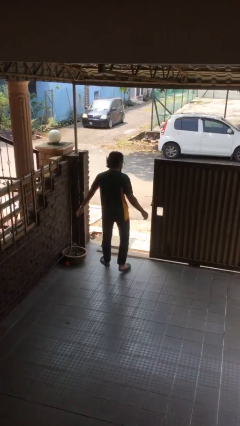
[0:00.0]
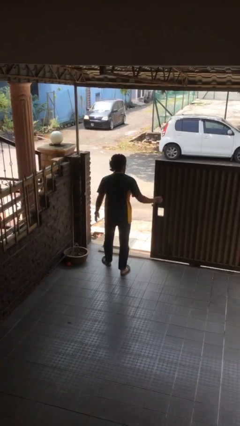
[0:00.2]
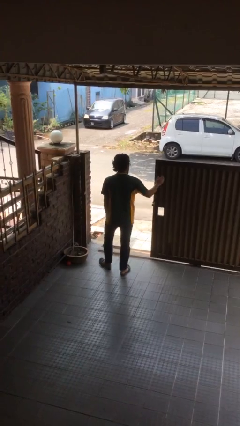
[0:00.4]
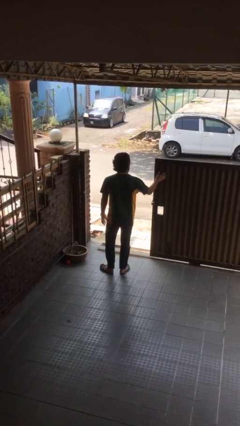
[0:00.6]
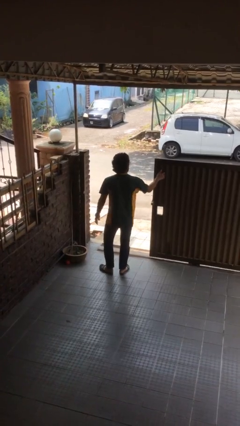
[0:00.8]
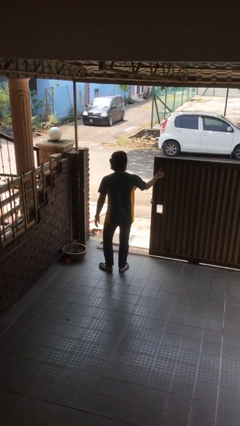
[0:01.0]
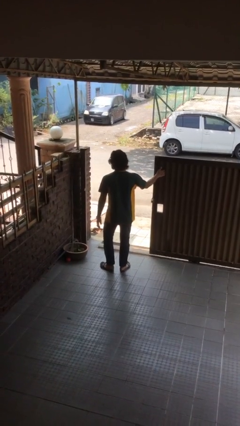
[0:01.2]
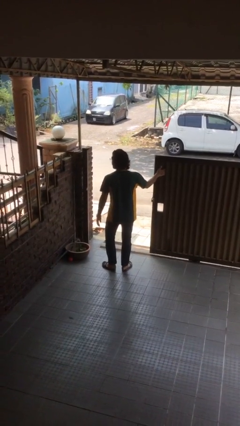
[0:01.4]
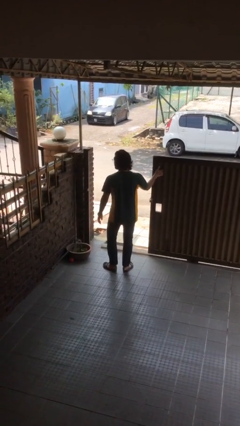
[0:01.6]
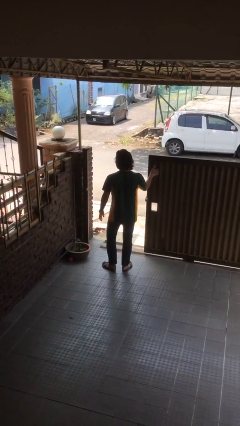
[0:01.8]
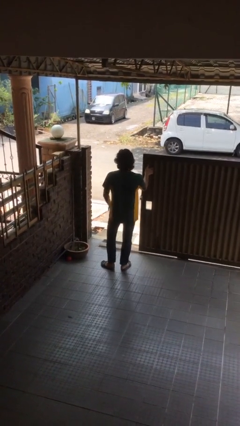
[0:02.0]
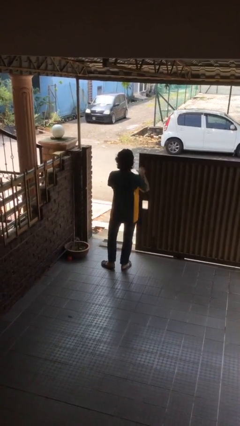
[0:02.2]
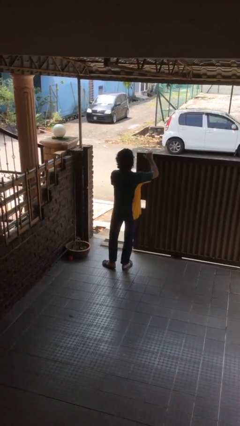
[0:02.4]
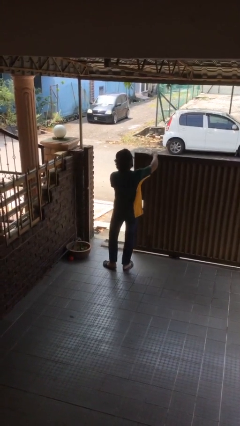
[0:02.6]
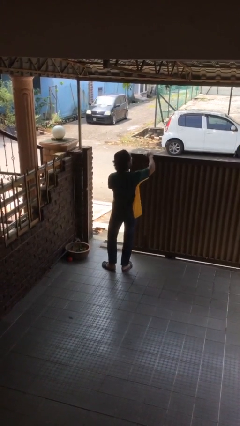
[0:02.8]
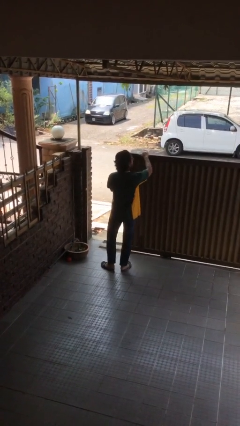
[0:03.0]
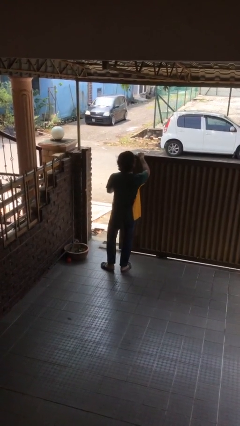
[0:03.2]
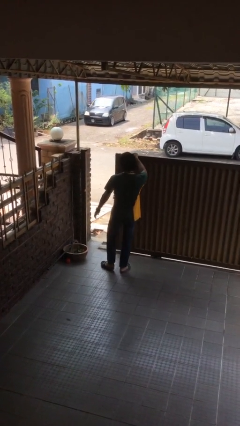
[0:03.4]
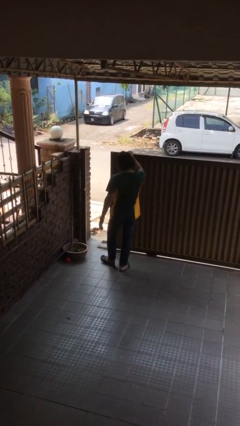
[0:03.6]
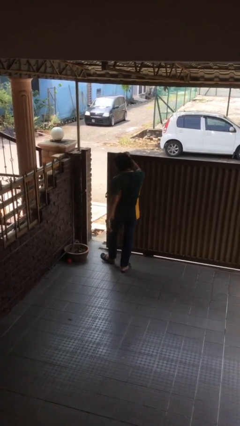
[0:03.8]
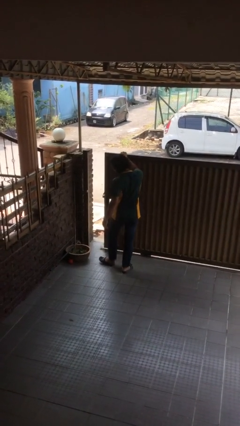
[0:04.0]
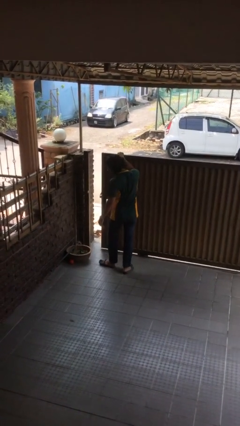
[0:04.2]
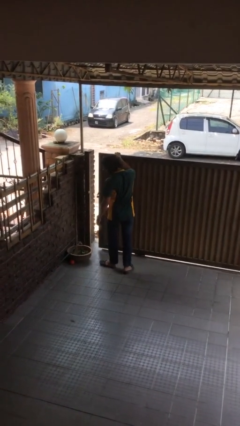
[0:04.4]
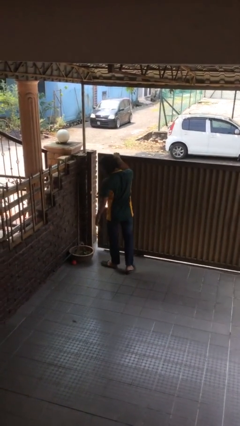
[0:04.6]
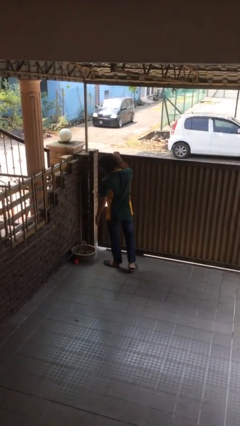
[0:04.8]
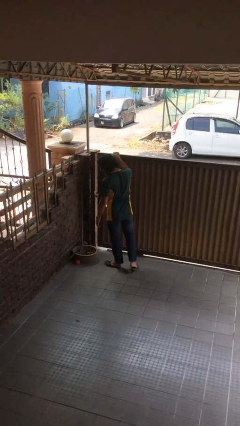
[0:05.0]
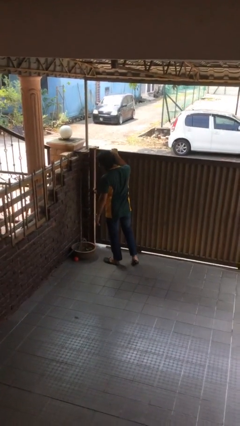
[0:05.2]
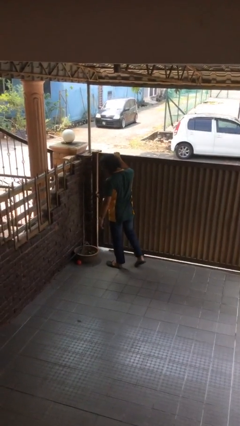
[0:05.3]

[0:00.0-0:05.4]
person closes facility door

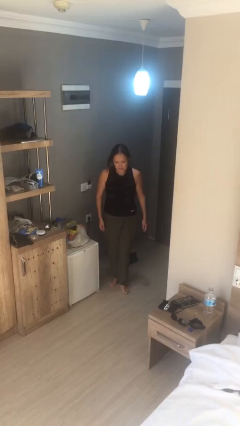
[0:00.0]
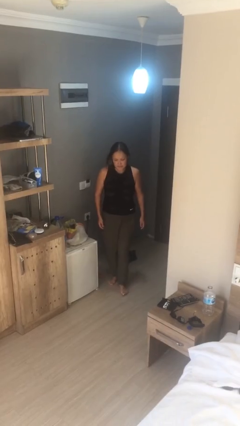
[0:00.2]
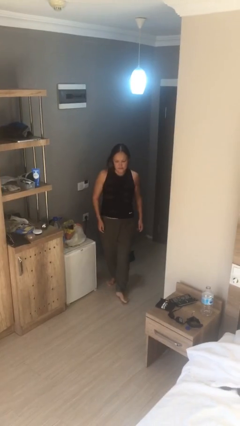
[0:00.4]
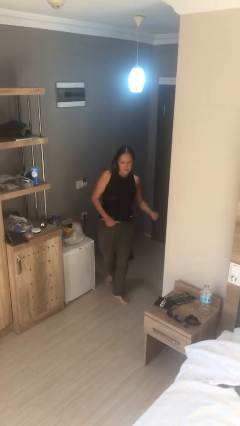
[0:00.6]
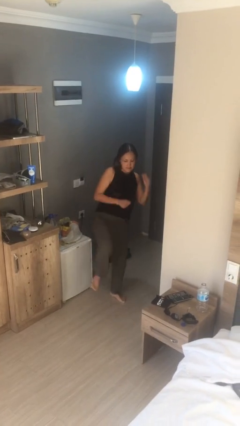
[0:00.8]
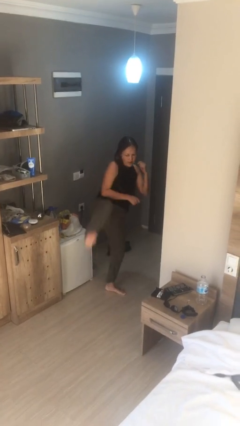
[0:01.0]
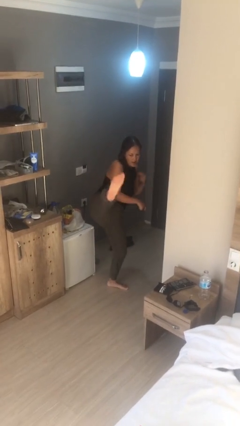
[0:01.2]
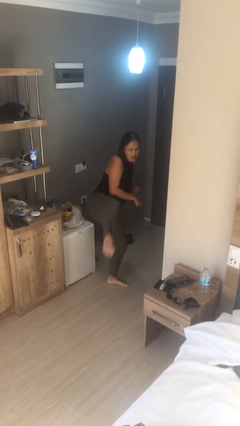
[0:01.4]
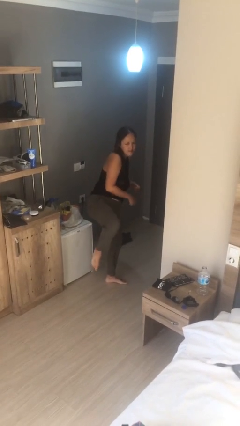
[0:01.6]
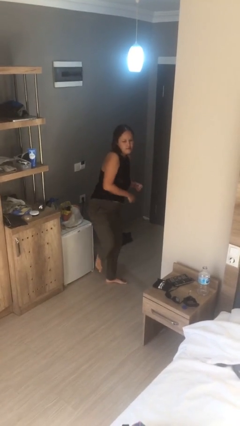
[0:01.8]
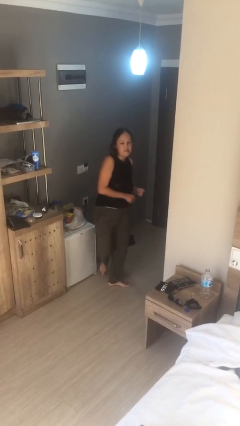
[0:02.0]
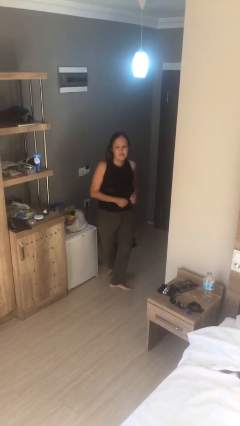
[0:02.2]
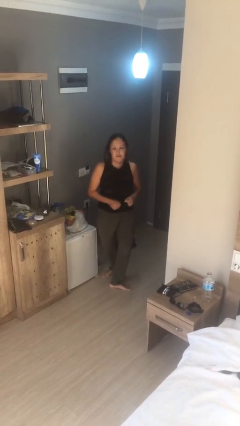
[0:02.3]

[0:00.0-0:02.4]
person karate kicks

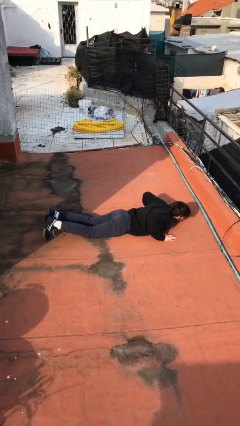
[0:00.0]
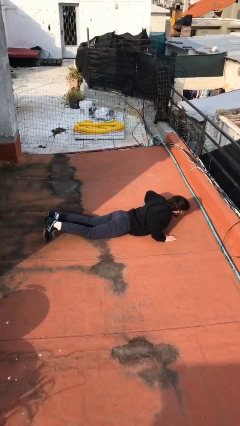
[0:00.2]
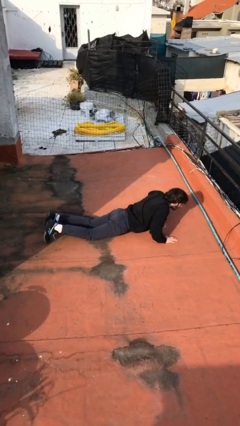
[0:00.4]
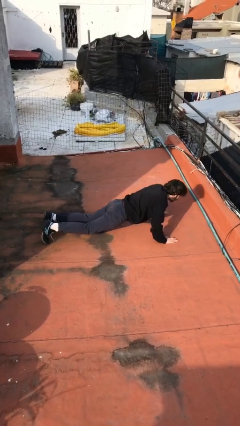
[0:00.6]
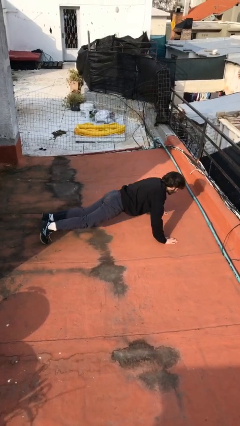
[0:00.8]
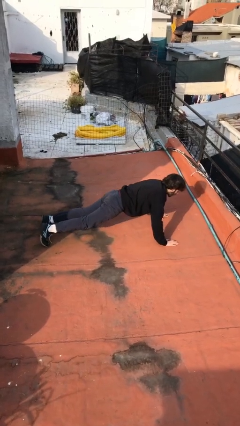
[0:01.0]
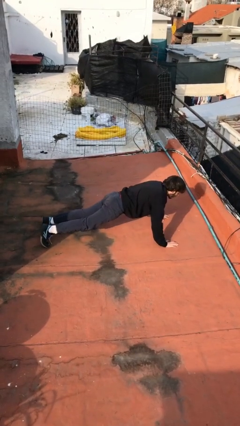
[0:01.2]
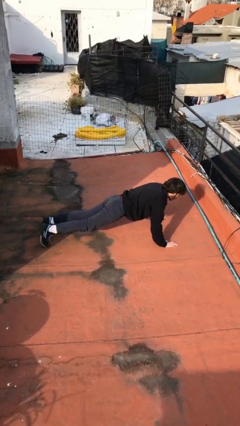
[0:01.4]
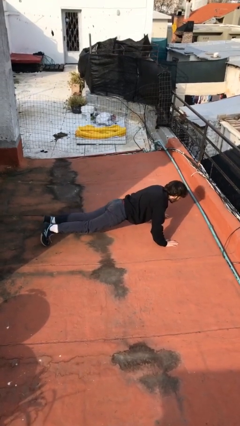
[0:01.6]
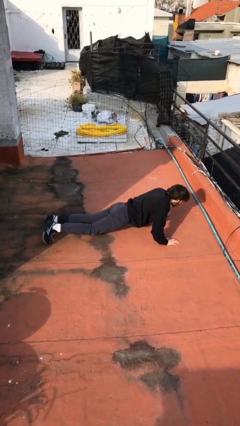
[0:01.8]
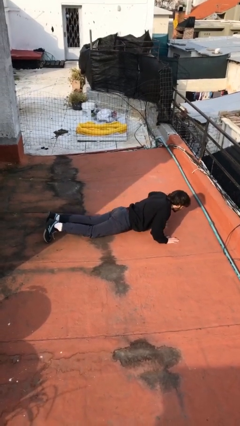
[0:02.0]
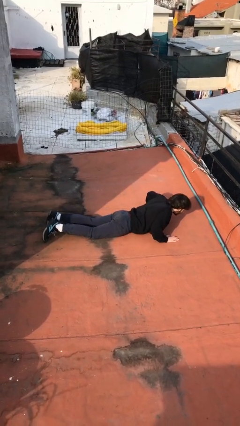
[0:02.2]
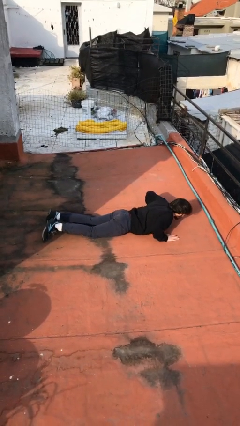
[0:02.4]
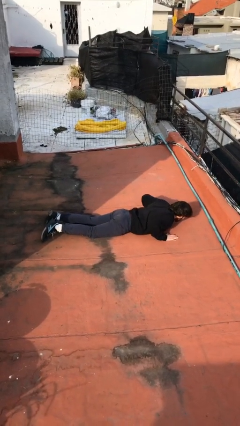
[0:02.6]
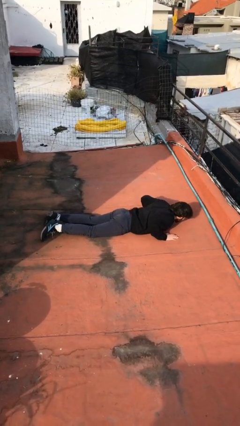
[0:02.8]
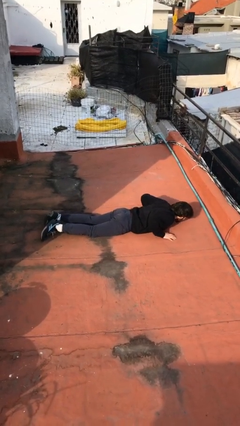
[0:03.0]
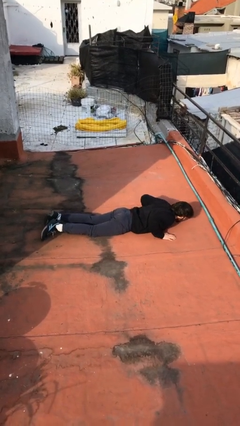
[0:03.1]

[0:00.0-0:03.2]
person exercises with pushup

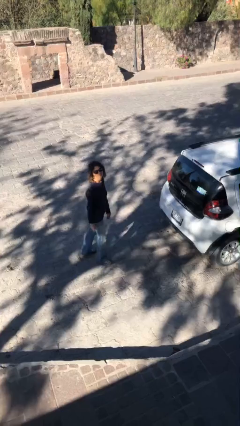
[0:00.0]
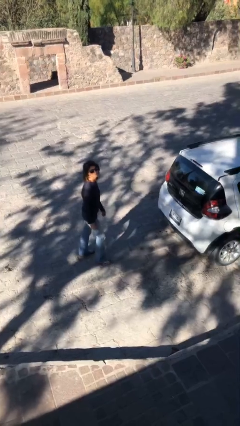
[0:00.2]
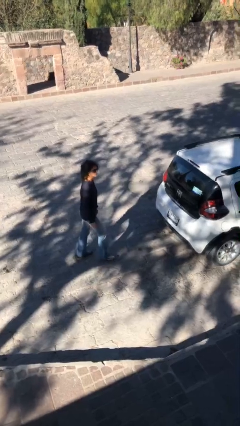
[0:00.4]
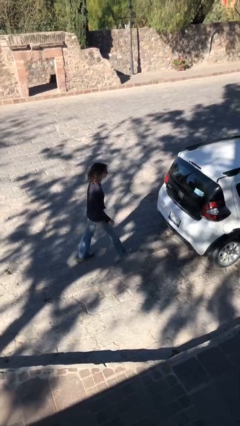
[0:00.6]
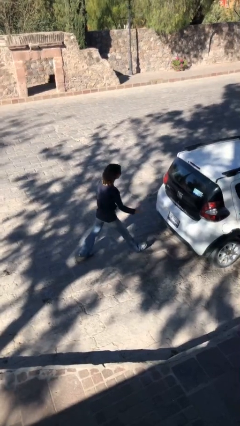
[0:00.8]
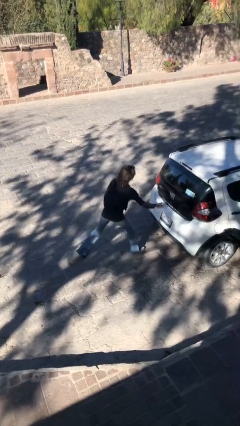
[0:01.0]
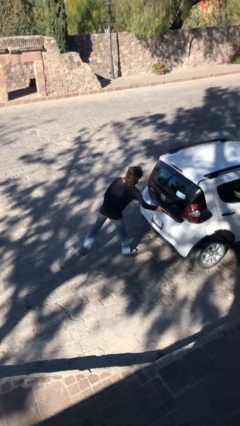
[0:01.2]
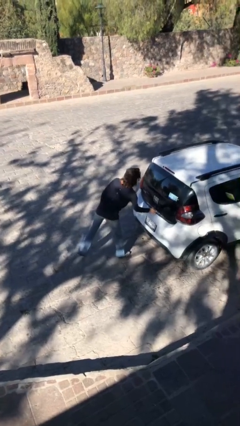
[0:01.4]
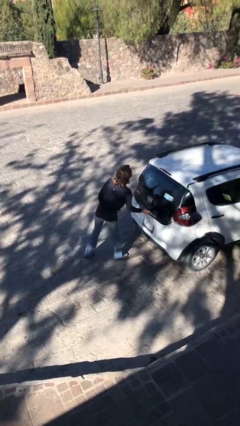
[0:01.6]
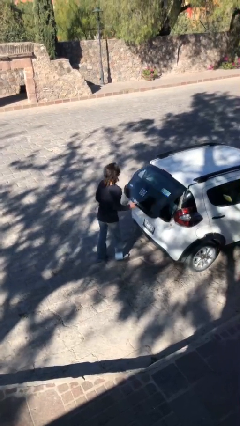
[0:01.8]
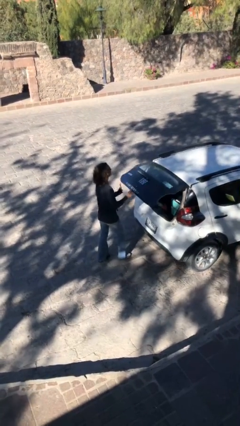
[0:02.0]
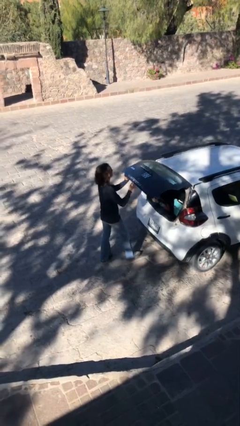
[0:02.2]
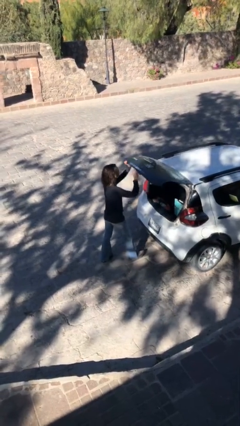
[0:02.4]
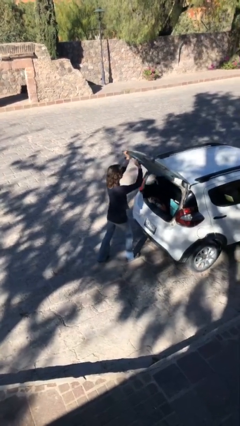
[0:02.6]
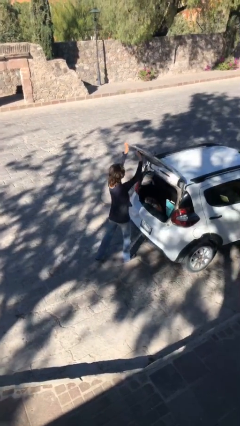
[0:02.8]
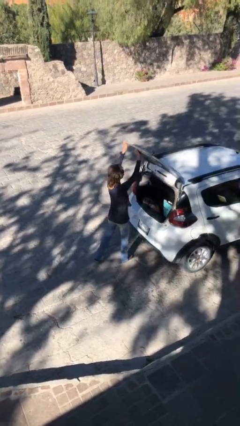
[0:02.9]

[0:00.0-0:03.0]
person opens car trunk

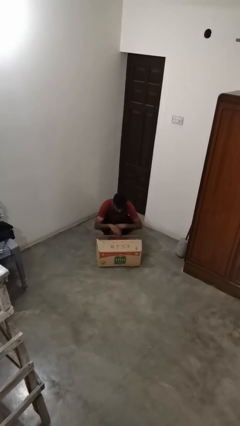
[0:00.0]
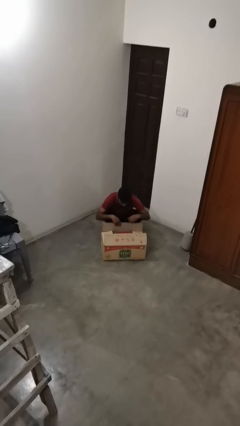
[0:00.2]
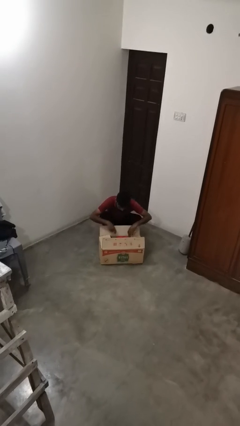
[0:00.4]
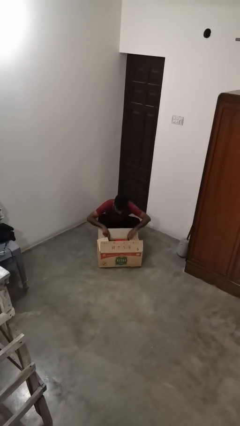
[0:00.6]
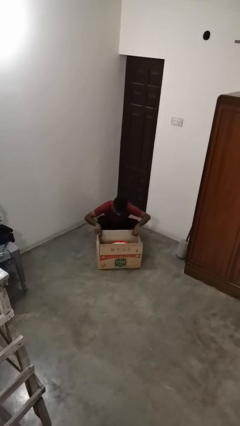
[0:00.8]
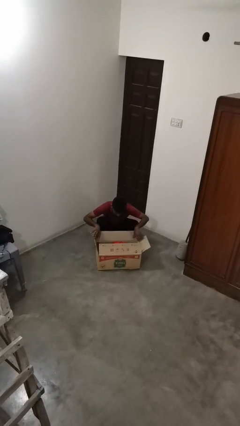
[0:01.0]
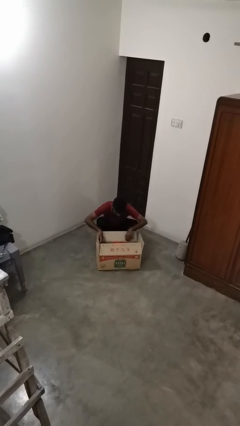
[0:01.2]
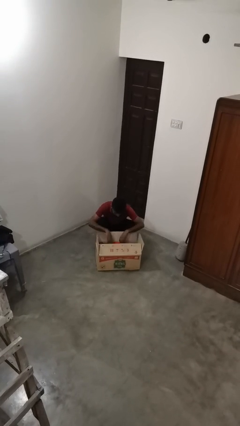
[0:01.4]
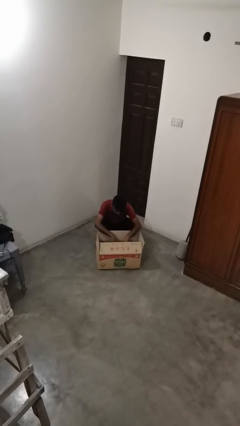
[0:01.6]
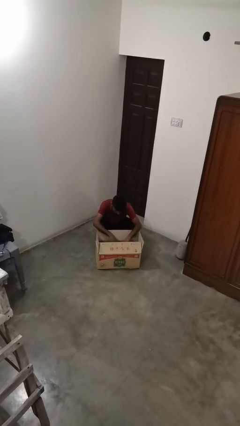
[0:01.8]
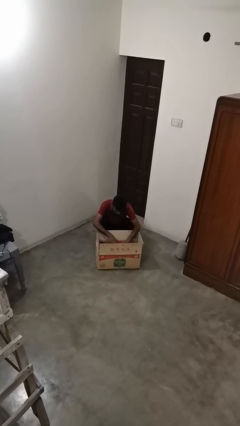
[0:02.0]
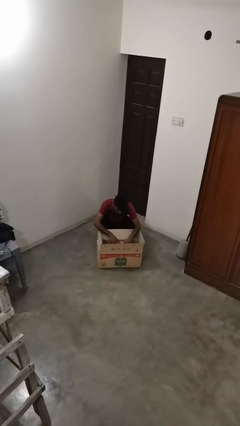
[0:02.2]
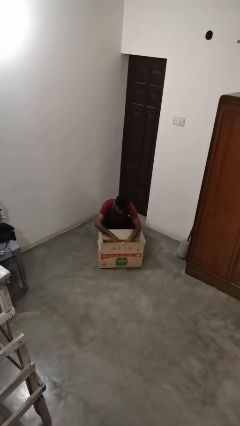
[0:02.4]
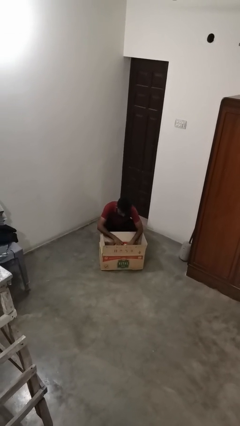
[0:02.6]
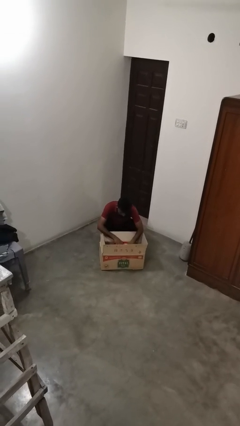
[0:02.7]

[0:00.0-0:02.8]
person searches in box

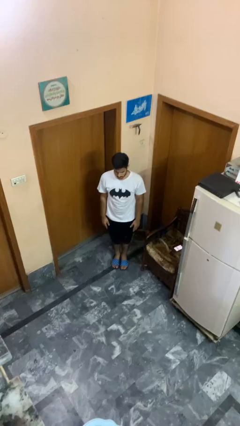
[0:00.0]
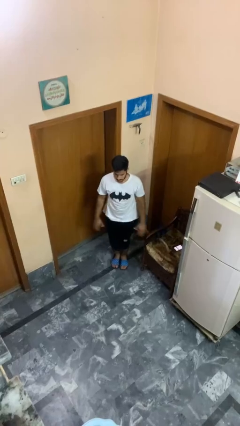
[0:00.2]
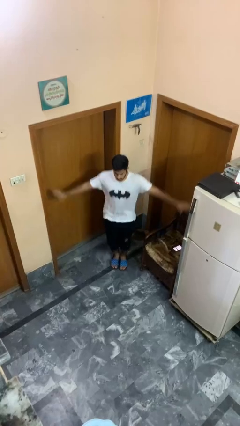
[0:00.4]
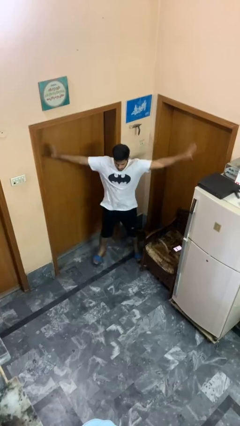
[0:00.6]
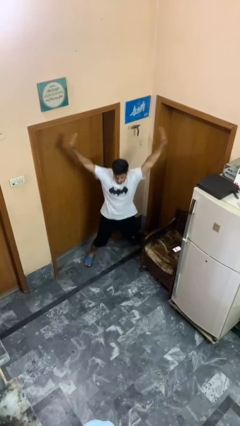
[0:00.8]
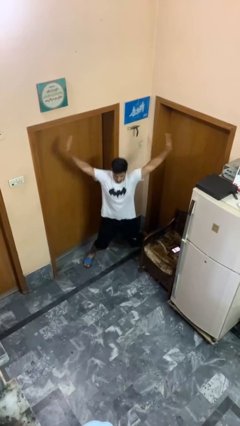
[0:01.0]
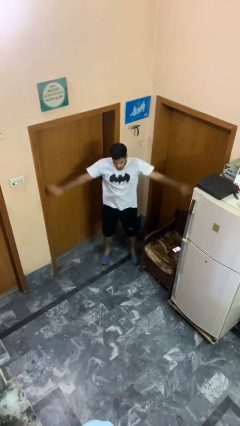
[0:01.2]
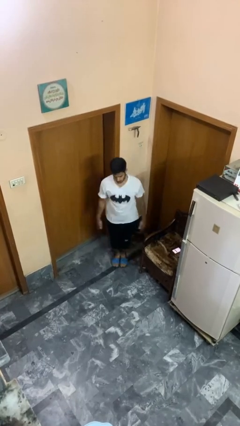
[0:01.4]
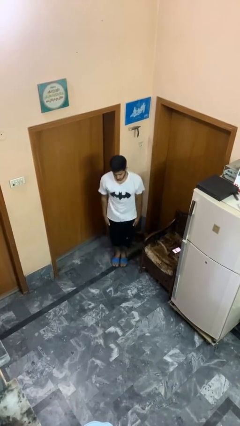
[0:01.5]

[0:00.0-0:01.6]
person exercises with jumping jacks
